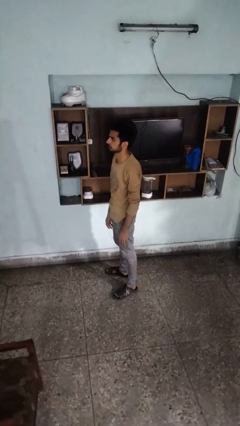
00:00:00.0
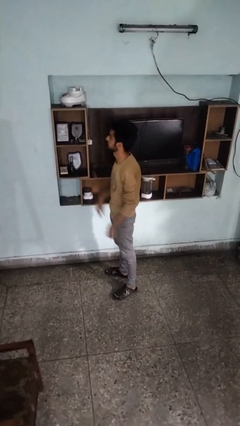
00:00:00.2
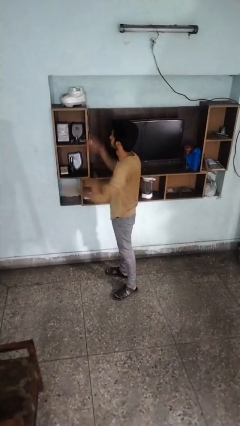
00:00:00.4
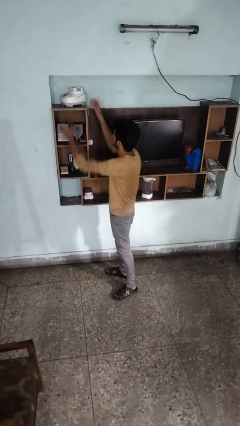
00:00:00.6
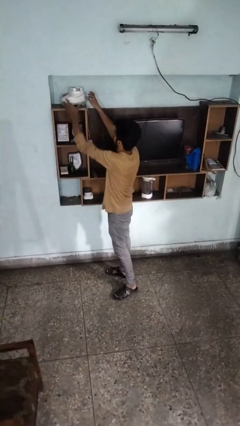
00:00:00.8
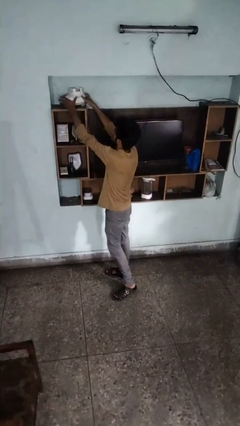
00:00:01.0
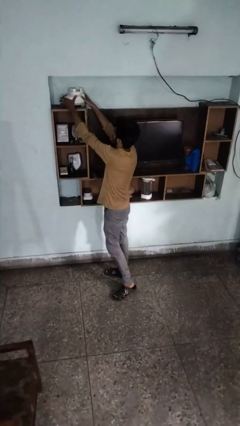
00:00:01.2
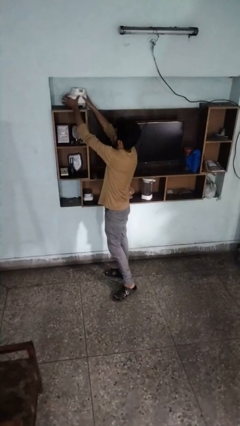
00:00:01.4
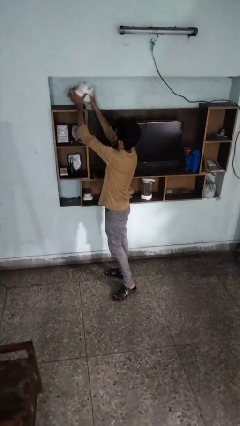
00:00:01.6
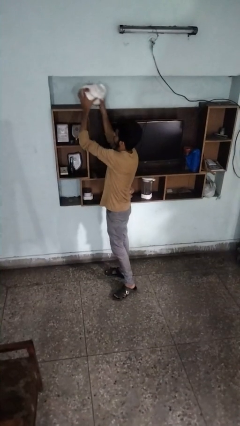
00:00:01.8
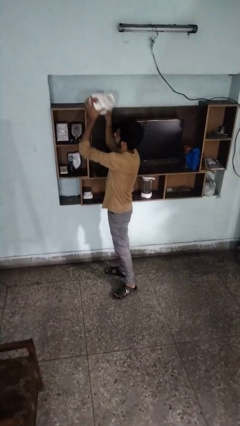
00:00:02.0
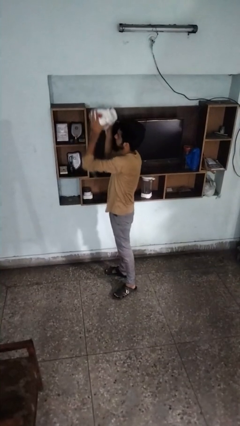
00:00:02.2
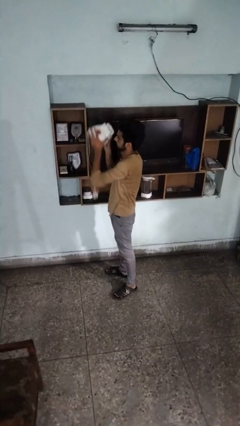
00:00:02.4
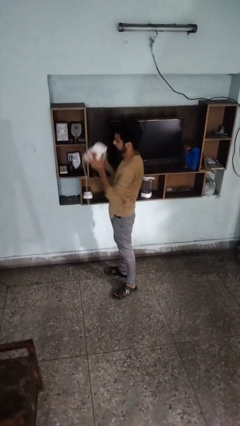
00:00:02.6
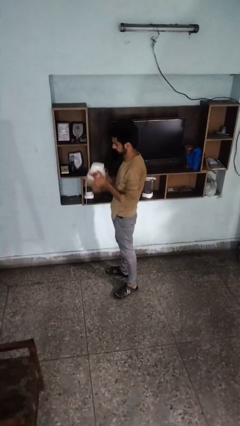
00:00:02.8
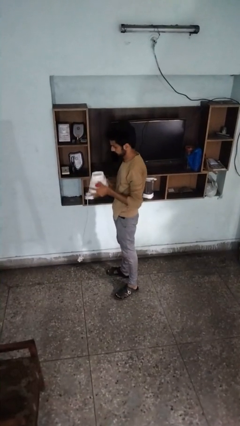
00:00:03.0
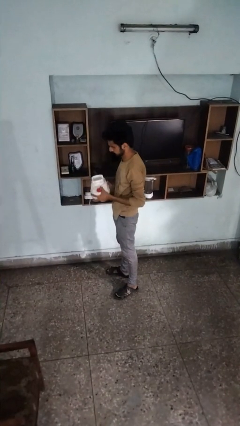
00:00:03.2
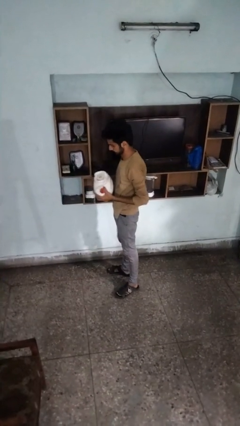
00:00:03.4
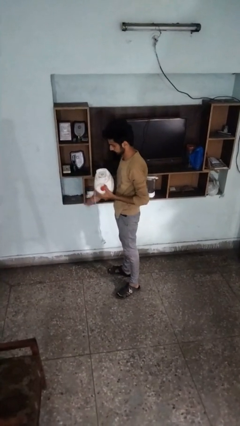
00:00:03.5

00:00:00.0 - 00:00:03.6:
person picks up object from shelf

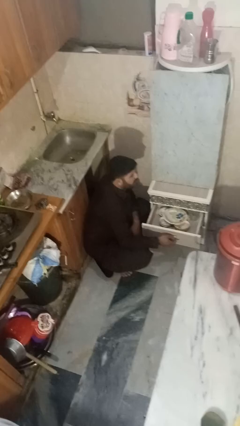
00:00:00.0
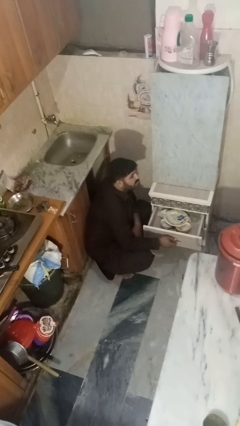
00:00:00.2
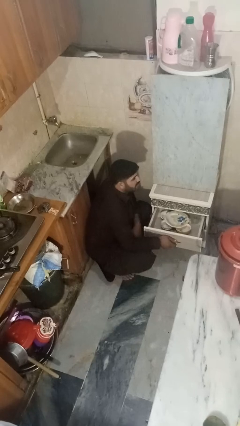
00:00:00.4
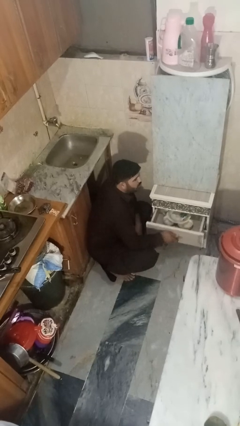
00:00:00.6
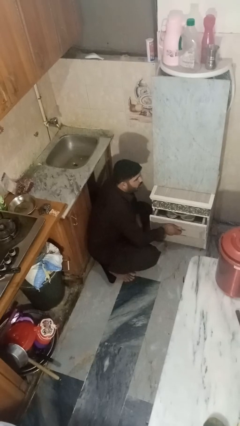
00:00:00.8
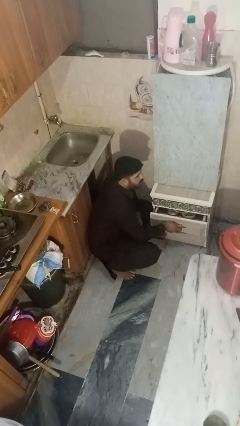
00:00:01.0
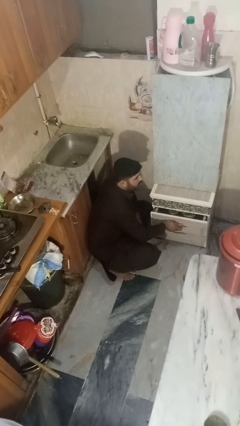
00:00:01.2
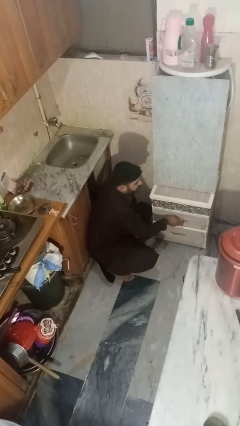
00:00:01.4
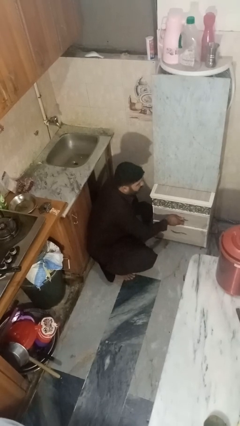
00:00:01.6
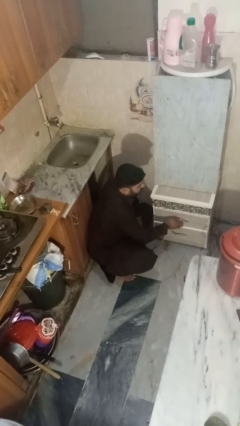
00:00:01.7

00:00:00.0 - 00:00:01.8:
person closes kitchen drawer

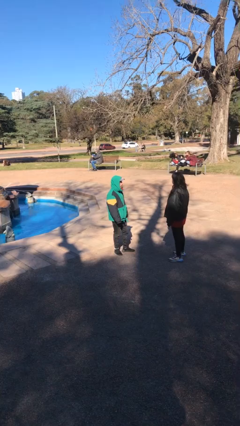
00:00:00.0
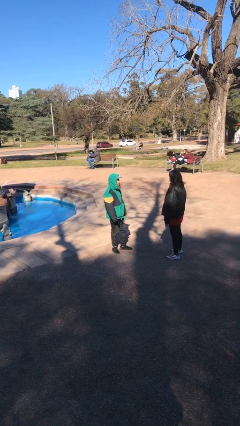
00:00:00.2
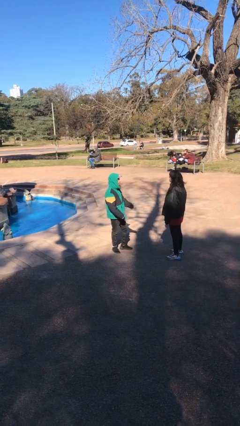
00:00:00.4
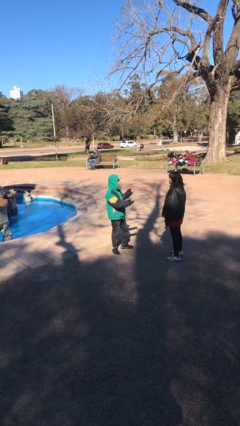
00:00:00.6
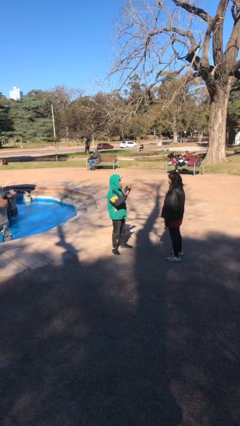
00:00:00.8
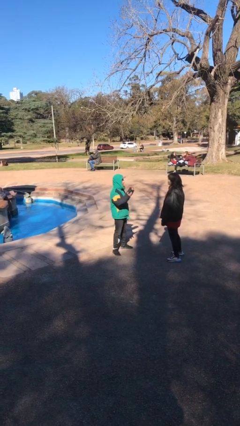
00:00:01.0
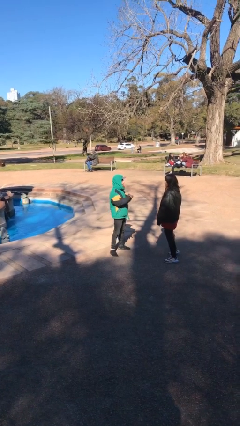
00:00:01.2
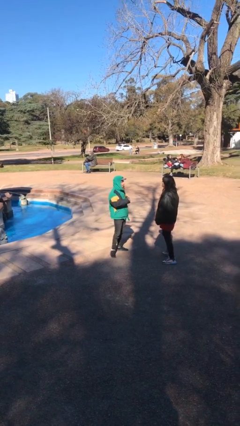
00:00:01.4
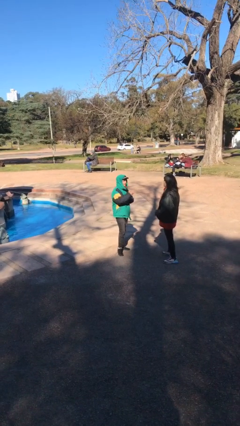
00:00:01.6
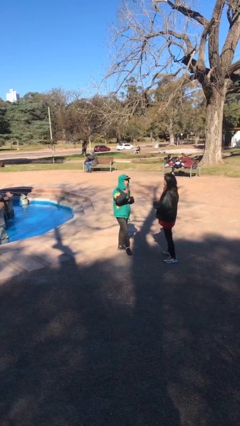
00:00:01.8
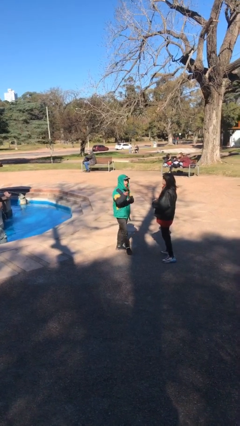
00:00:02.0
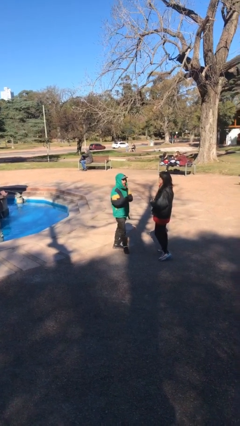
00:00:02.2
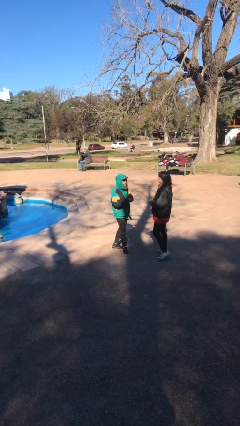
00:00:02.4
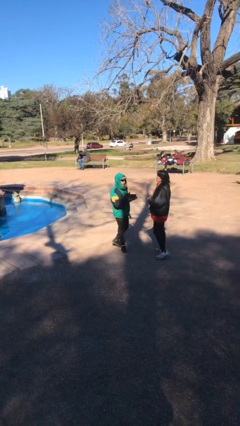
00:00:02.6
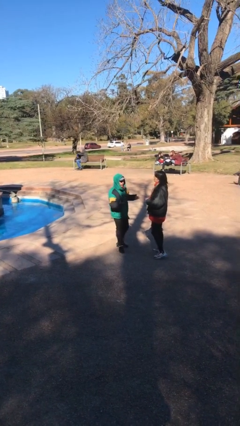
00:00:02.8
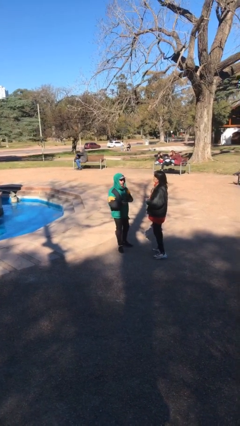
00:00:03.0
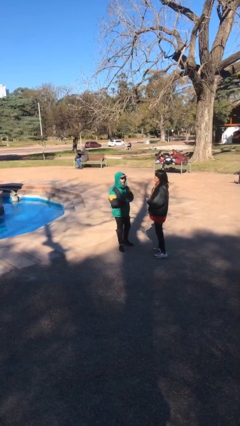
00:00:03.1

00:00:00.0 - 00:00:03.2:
person talks to person

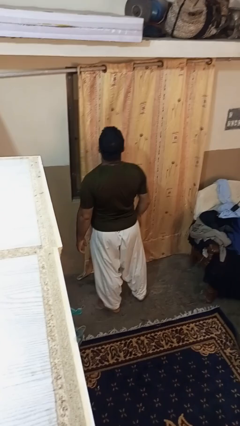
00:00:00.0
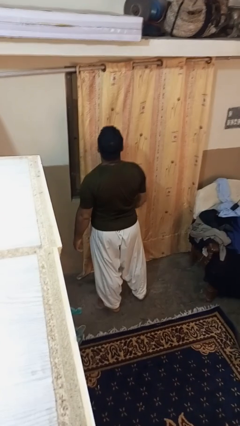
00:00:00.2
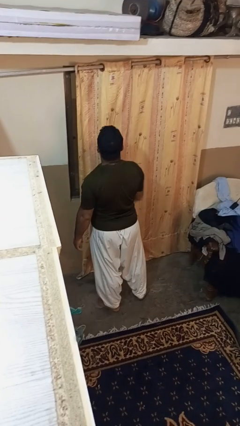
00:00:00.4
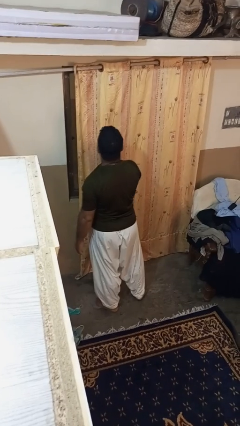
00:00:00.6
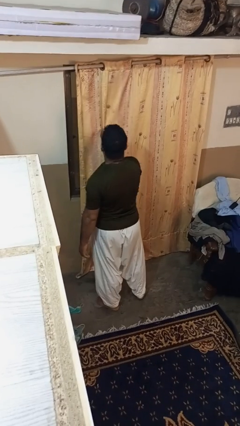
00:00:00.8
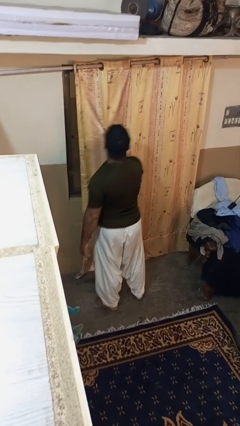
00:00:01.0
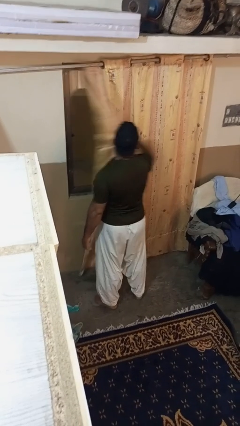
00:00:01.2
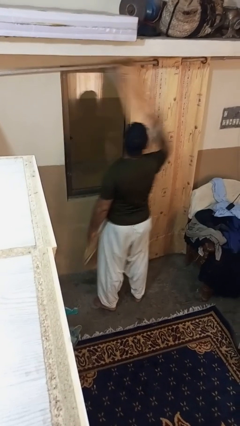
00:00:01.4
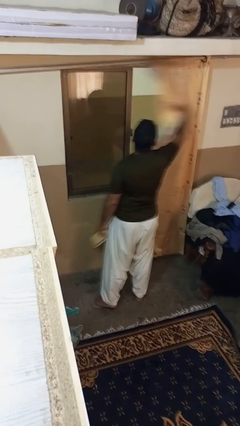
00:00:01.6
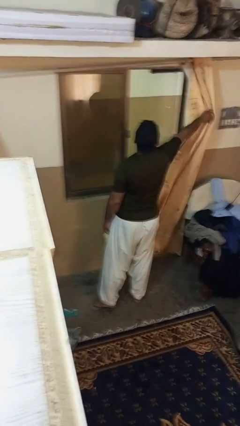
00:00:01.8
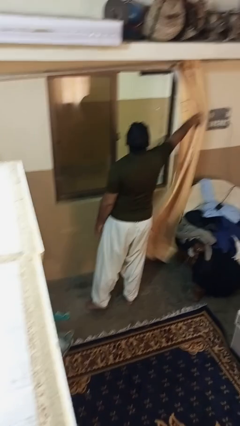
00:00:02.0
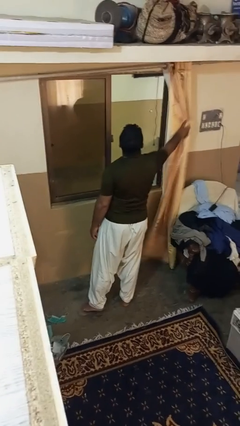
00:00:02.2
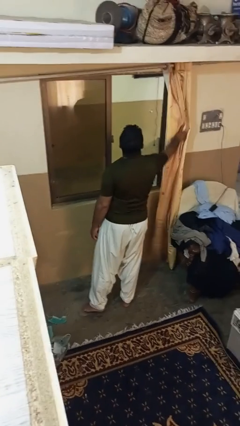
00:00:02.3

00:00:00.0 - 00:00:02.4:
person opens curtains

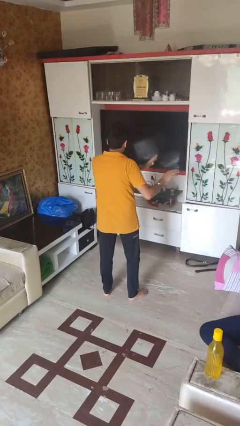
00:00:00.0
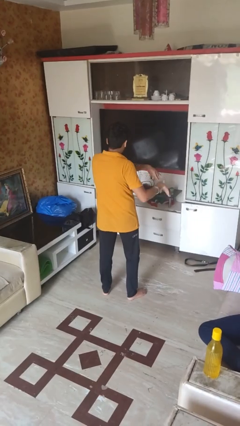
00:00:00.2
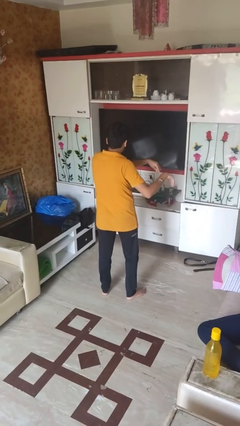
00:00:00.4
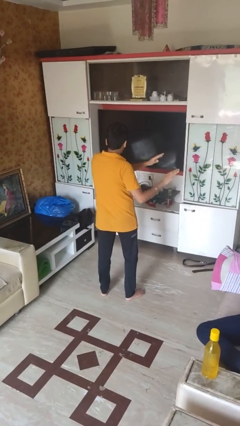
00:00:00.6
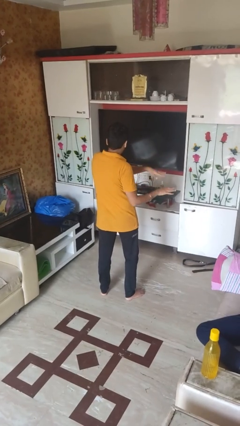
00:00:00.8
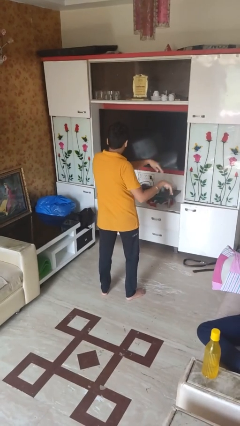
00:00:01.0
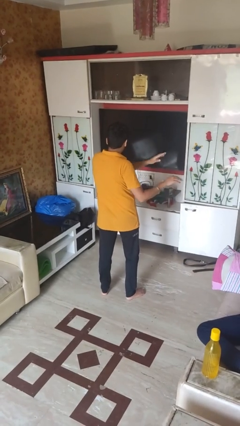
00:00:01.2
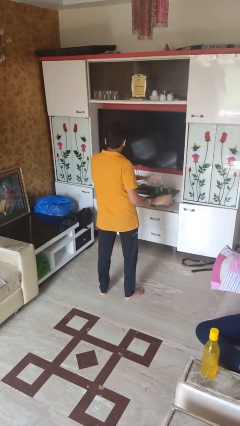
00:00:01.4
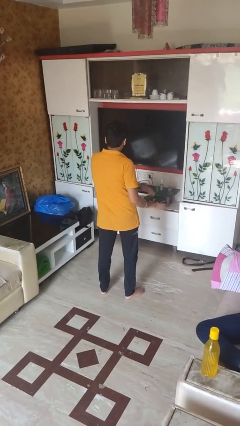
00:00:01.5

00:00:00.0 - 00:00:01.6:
person dances in place

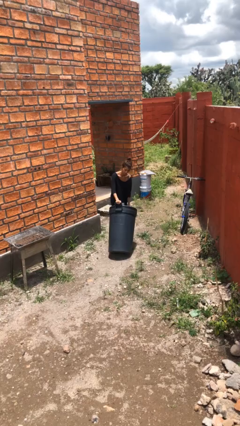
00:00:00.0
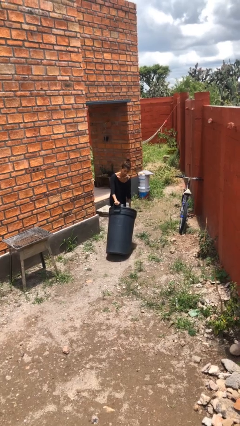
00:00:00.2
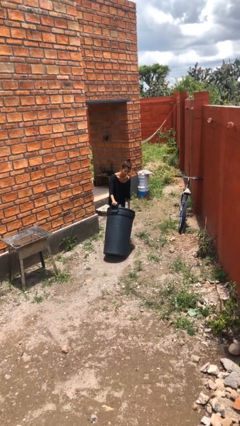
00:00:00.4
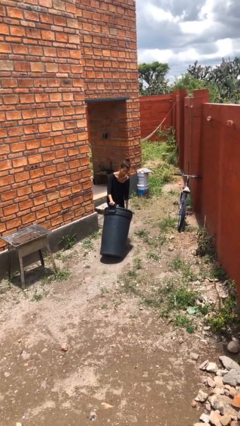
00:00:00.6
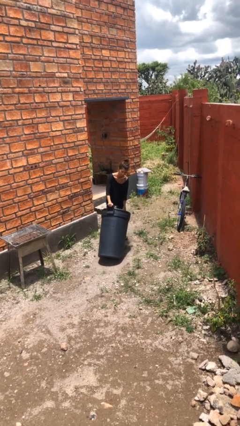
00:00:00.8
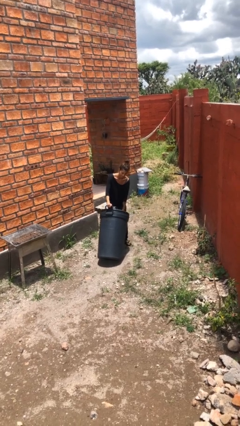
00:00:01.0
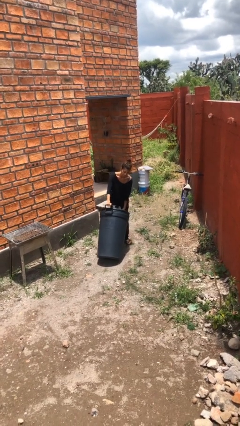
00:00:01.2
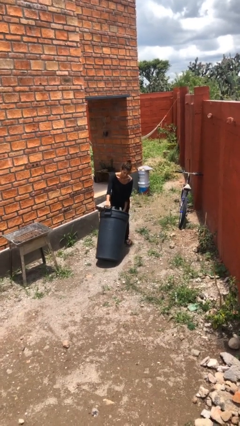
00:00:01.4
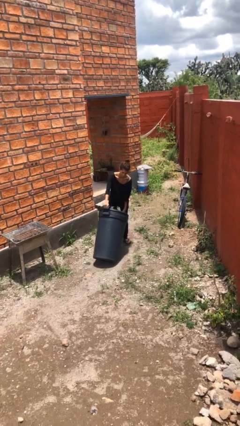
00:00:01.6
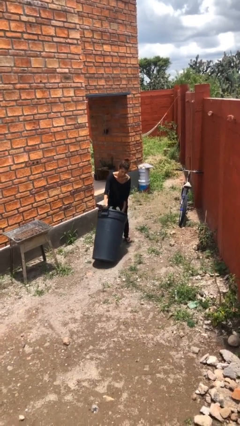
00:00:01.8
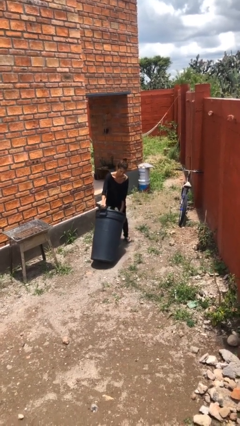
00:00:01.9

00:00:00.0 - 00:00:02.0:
person pushes wheeled trashcan

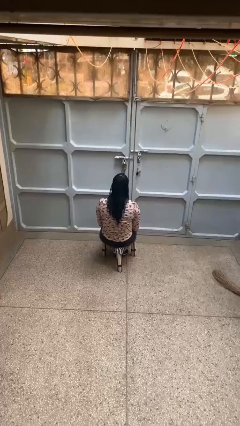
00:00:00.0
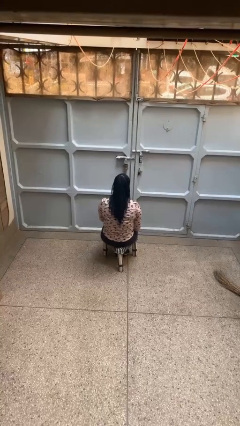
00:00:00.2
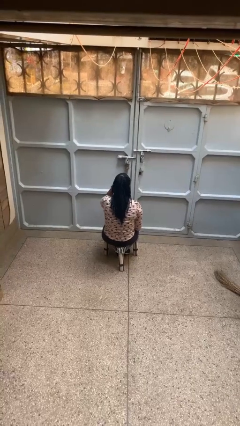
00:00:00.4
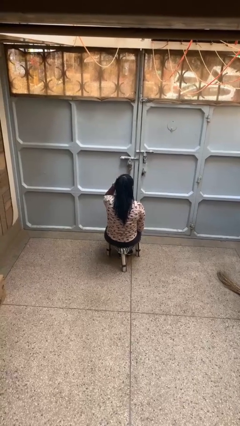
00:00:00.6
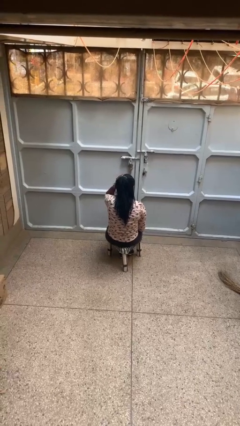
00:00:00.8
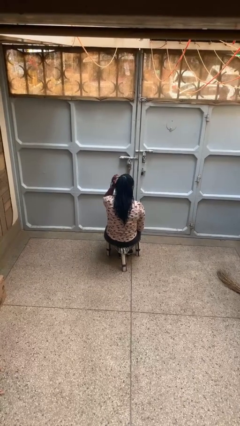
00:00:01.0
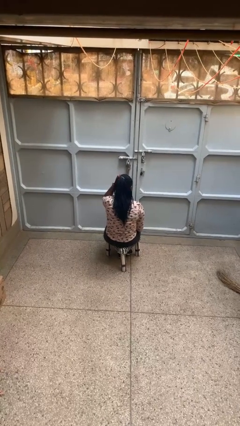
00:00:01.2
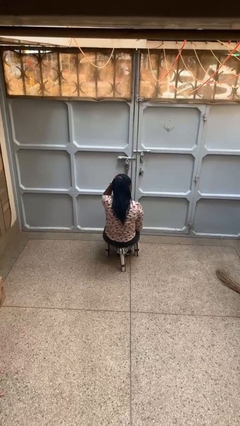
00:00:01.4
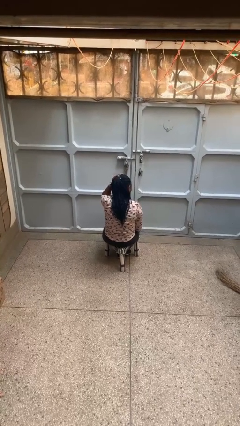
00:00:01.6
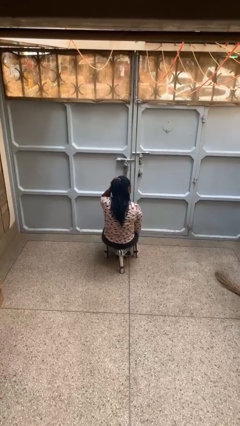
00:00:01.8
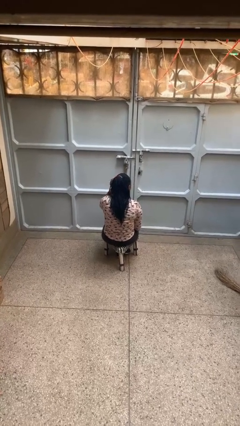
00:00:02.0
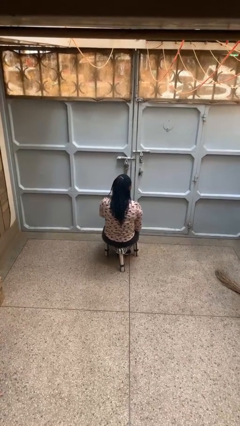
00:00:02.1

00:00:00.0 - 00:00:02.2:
person strokes hair
